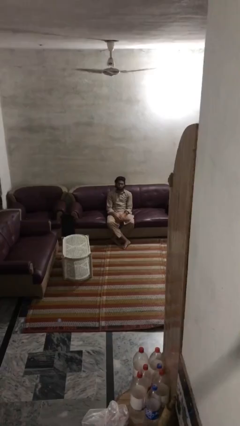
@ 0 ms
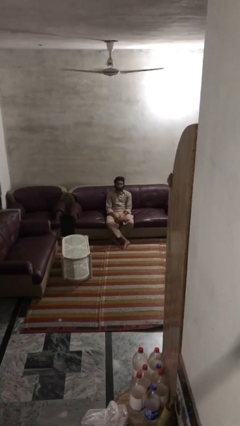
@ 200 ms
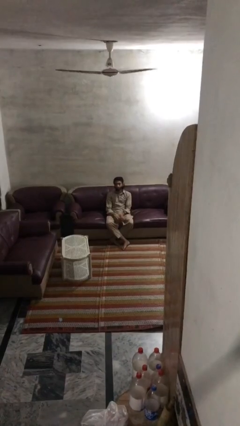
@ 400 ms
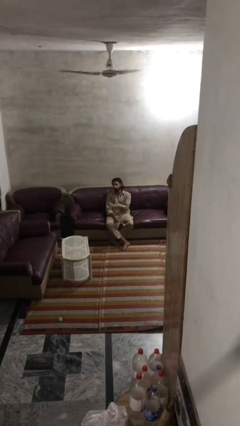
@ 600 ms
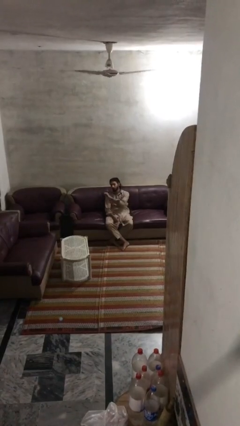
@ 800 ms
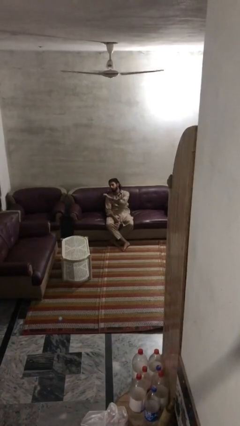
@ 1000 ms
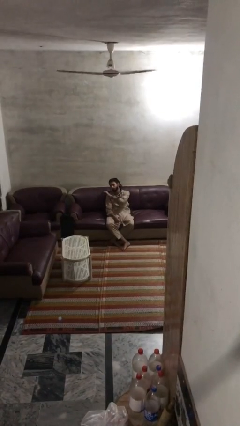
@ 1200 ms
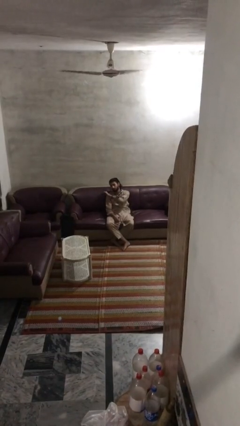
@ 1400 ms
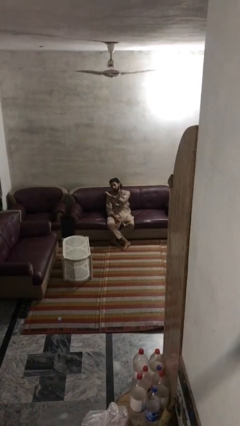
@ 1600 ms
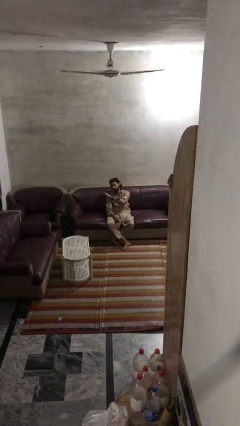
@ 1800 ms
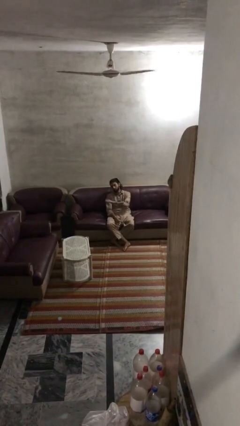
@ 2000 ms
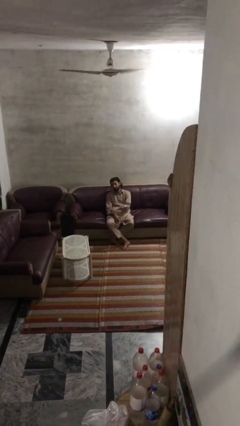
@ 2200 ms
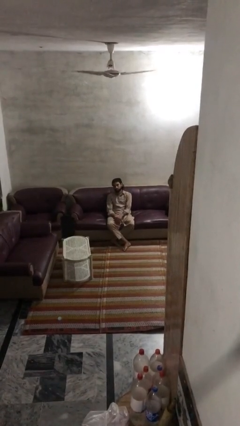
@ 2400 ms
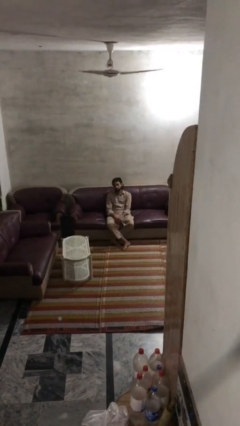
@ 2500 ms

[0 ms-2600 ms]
person gestures behind me

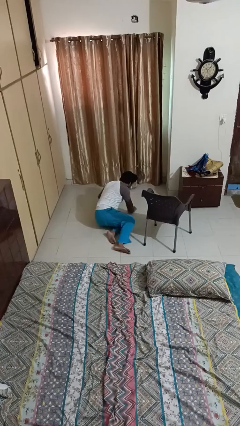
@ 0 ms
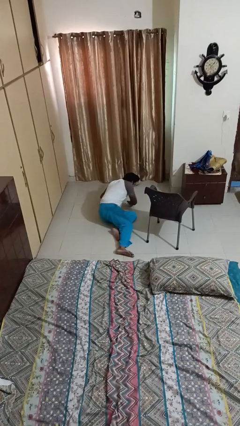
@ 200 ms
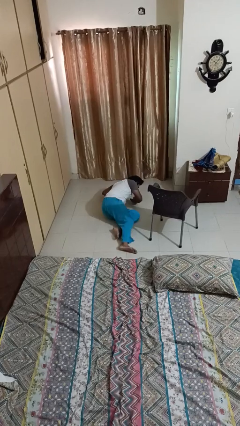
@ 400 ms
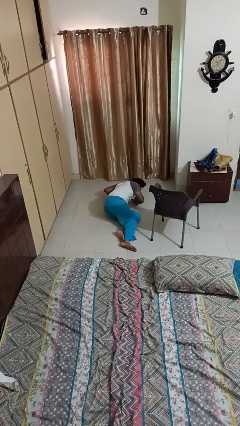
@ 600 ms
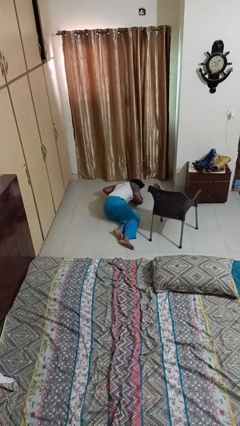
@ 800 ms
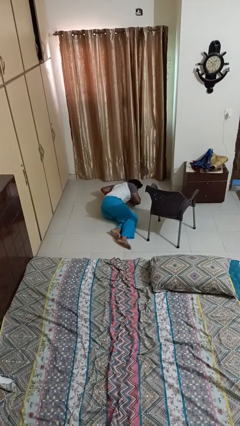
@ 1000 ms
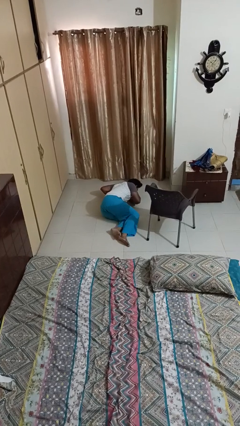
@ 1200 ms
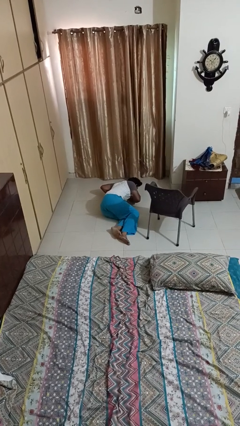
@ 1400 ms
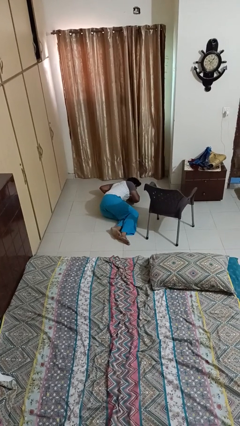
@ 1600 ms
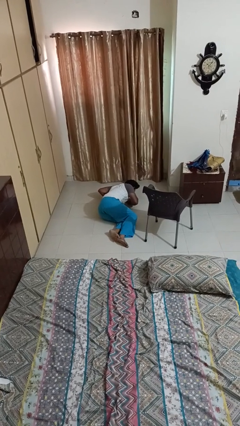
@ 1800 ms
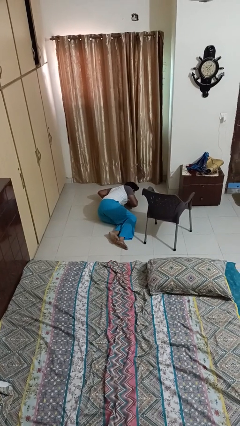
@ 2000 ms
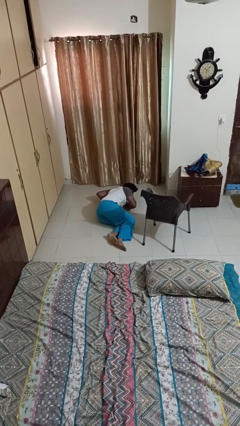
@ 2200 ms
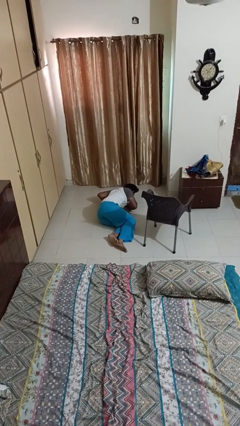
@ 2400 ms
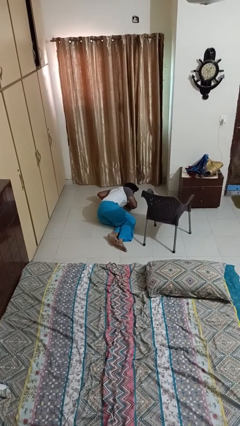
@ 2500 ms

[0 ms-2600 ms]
person lies down on floor

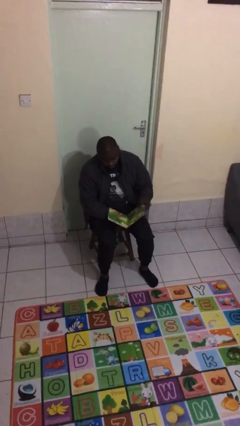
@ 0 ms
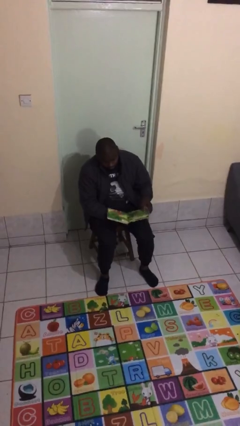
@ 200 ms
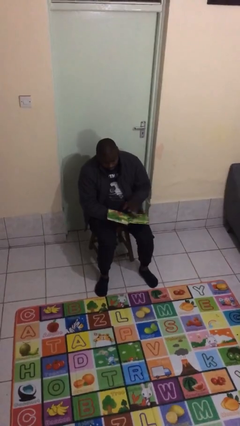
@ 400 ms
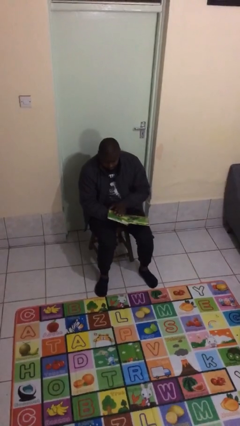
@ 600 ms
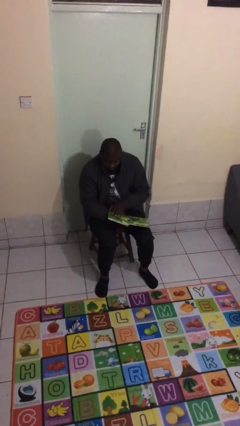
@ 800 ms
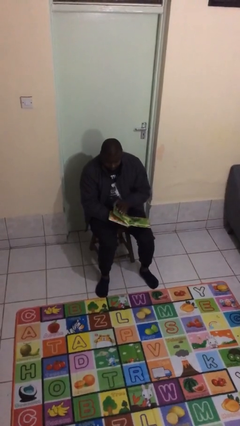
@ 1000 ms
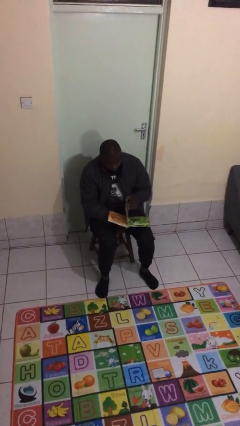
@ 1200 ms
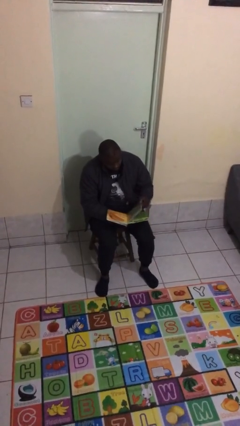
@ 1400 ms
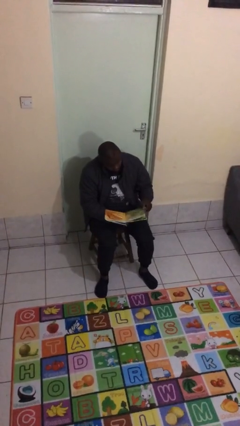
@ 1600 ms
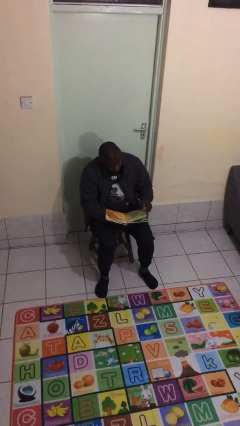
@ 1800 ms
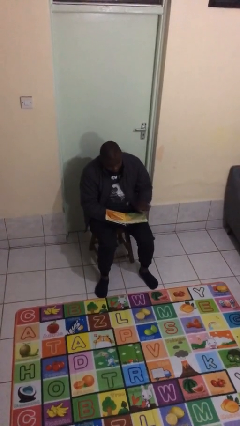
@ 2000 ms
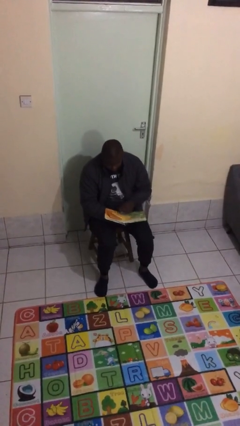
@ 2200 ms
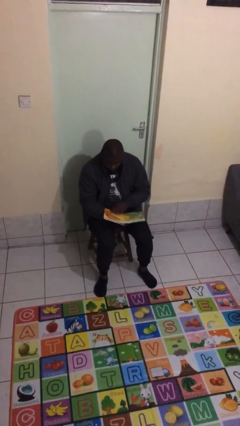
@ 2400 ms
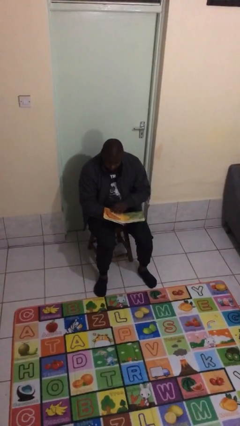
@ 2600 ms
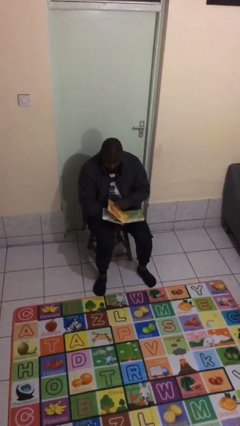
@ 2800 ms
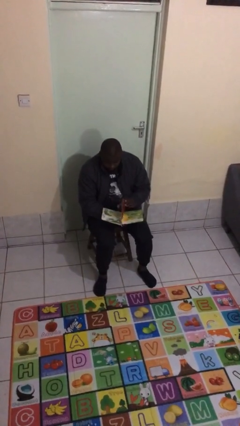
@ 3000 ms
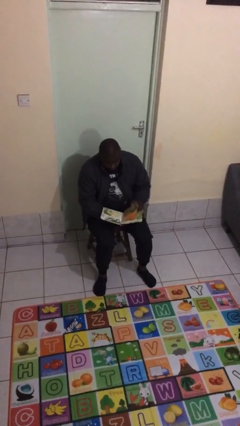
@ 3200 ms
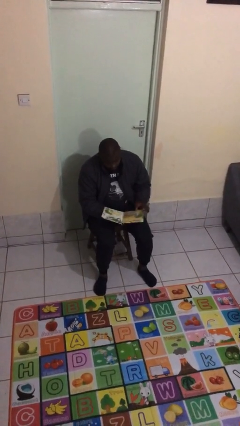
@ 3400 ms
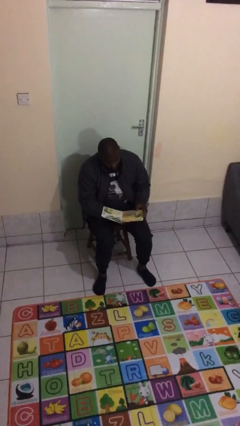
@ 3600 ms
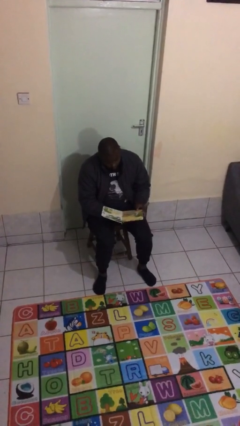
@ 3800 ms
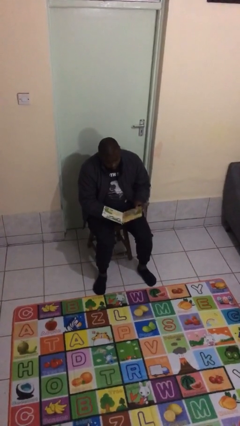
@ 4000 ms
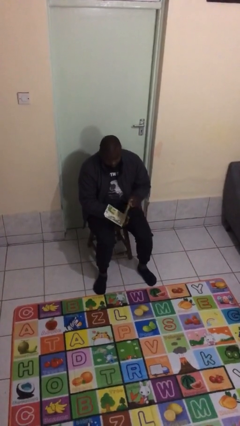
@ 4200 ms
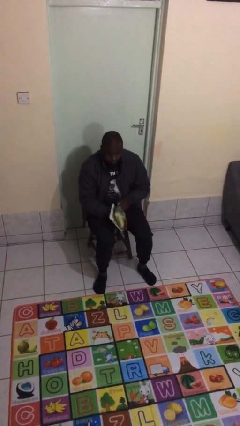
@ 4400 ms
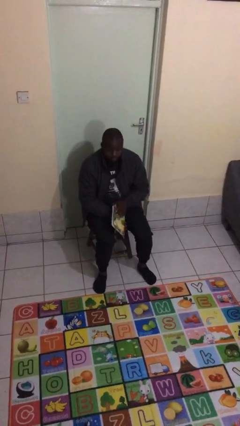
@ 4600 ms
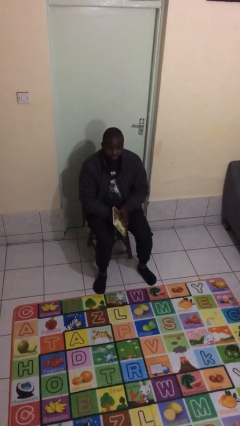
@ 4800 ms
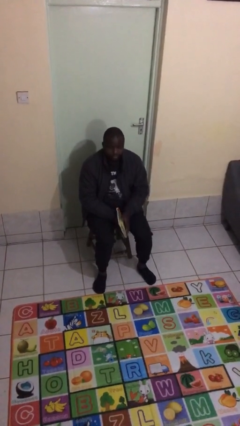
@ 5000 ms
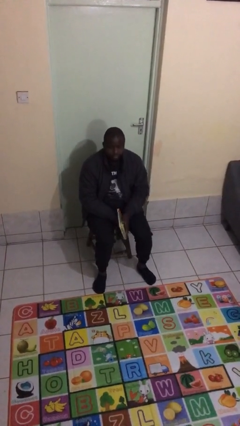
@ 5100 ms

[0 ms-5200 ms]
person reads book

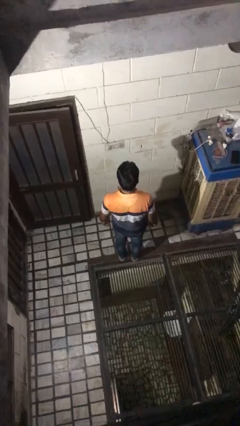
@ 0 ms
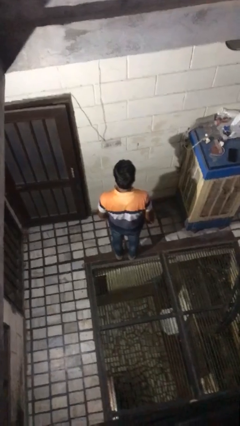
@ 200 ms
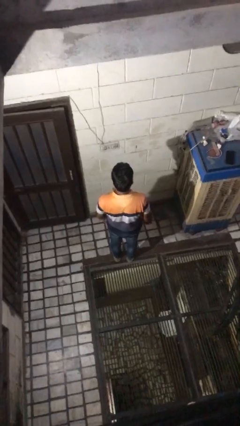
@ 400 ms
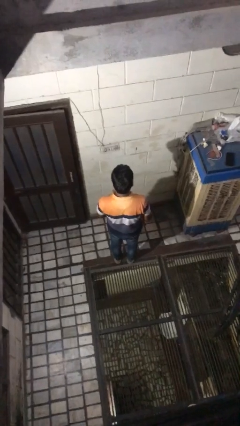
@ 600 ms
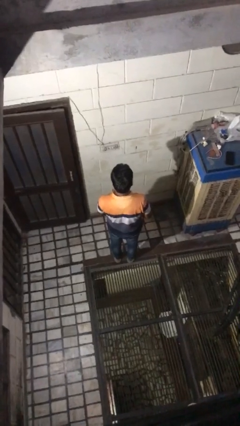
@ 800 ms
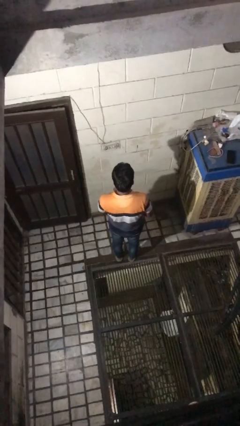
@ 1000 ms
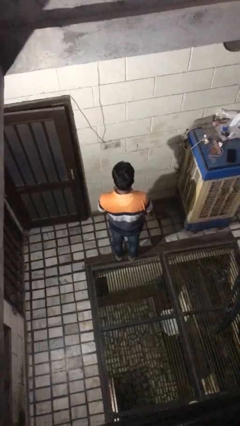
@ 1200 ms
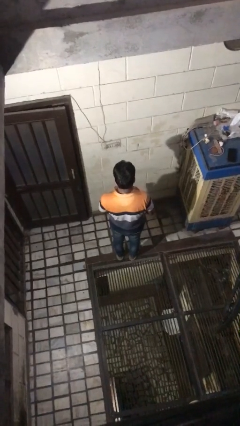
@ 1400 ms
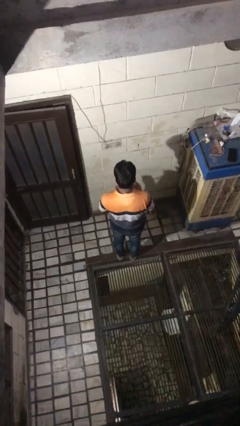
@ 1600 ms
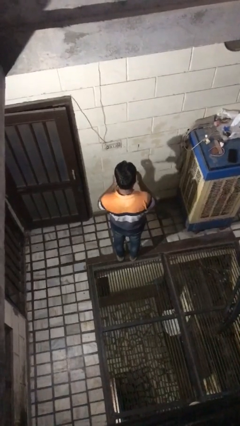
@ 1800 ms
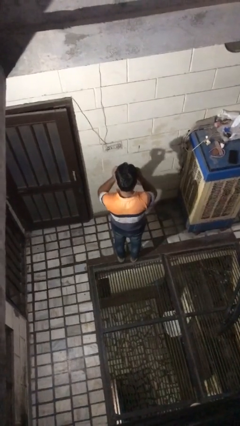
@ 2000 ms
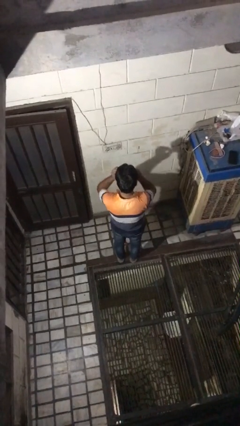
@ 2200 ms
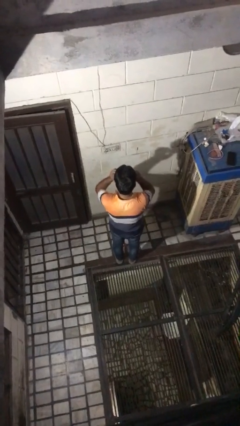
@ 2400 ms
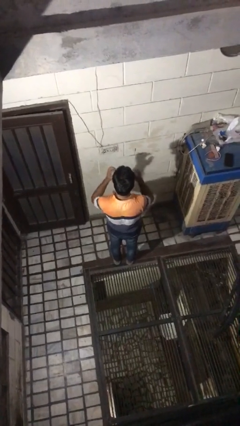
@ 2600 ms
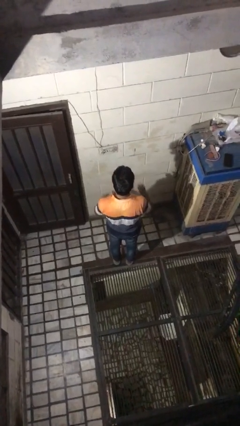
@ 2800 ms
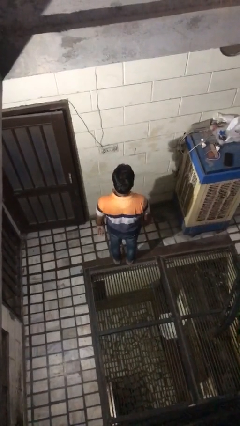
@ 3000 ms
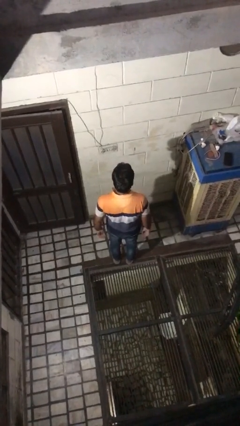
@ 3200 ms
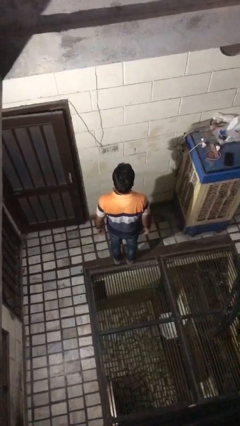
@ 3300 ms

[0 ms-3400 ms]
person puts on glasses

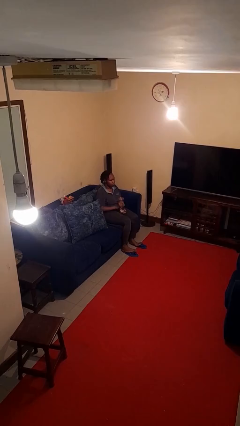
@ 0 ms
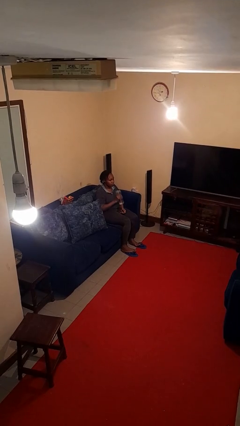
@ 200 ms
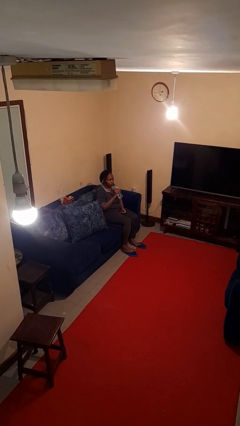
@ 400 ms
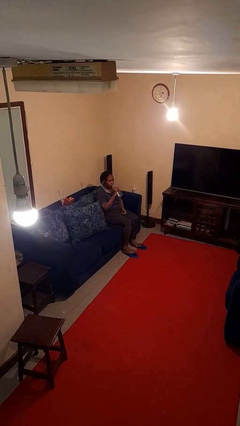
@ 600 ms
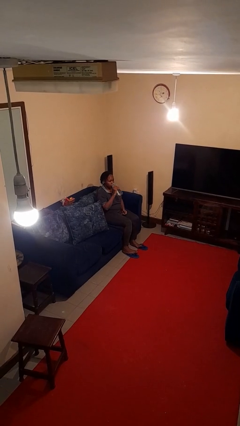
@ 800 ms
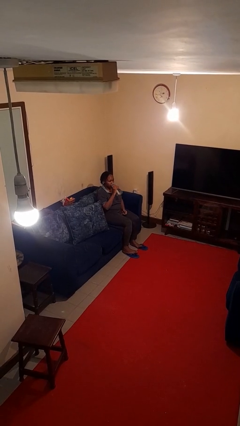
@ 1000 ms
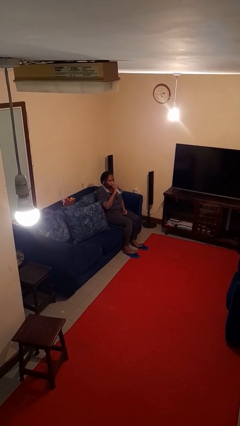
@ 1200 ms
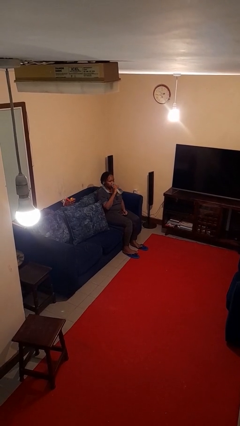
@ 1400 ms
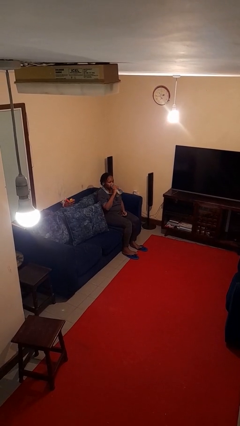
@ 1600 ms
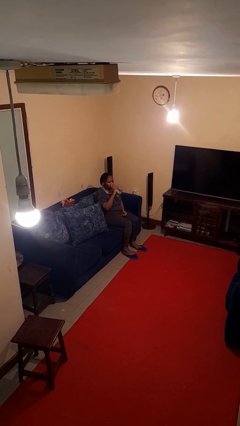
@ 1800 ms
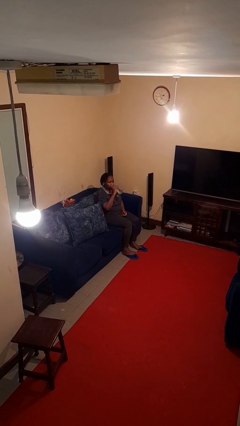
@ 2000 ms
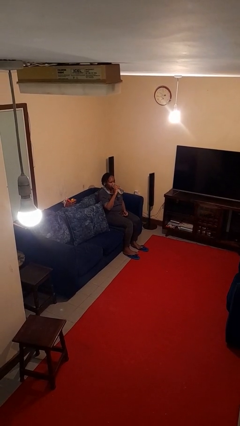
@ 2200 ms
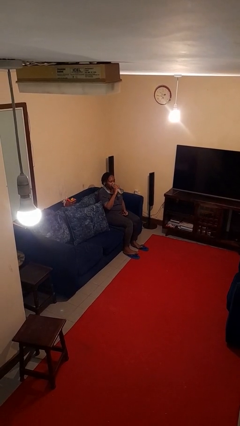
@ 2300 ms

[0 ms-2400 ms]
person drinks from bottle

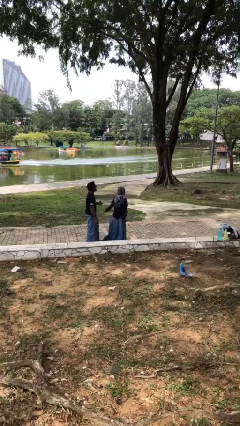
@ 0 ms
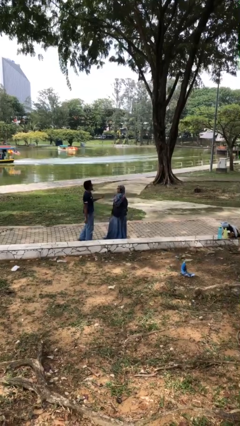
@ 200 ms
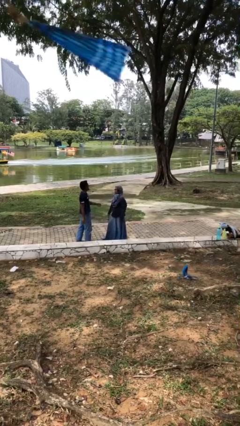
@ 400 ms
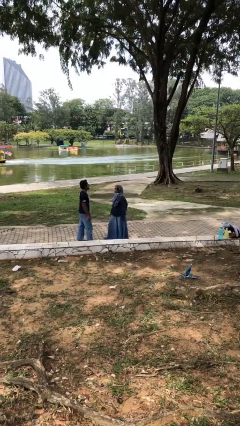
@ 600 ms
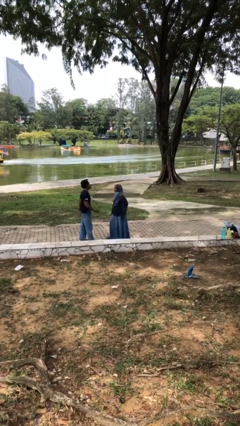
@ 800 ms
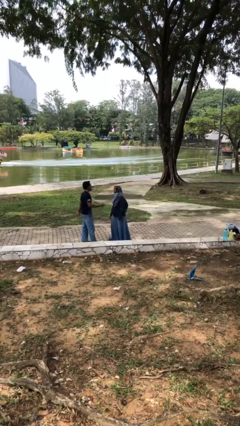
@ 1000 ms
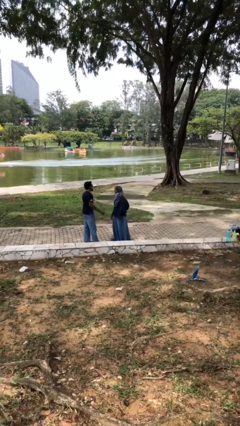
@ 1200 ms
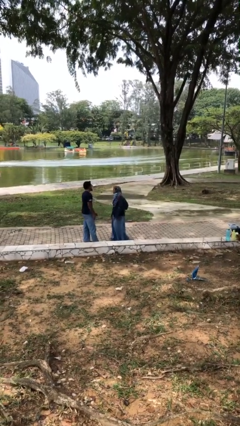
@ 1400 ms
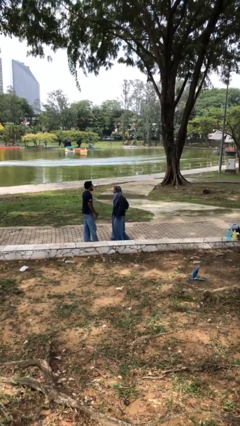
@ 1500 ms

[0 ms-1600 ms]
person talks to person
